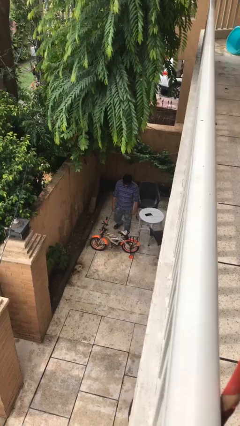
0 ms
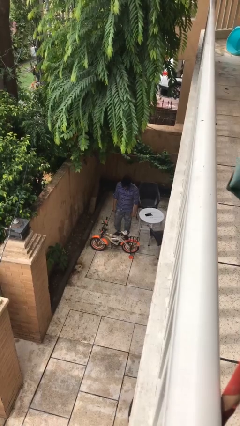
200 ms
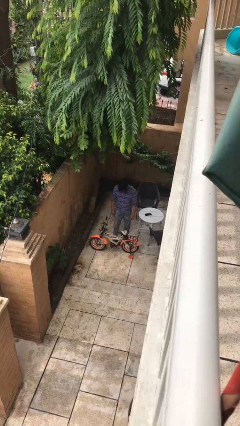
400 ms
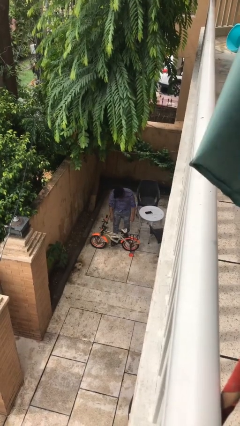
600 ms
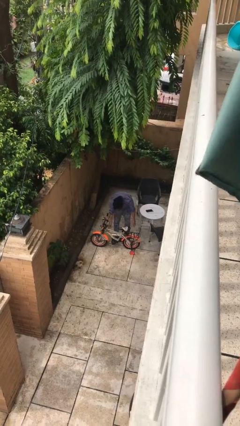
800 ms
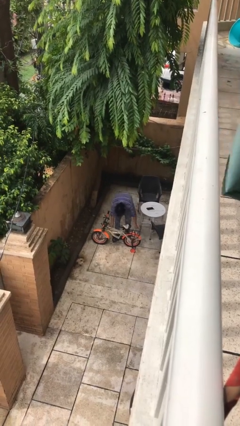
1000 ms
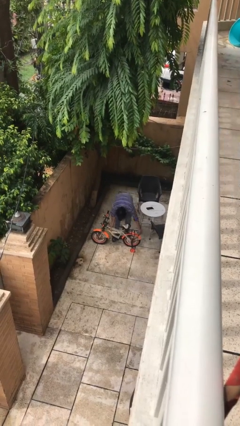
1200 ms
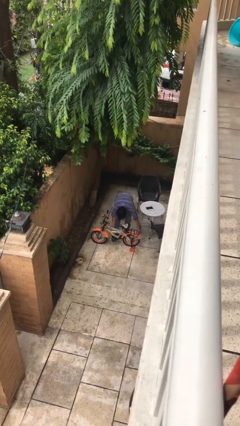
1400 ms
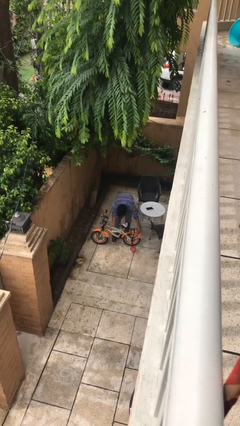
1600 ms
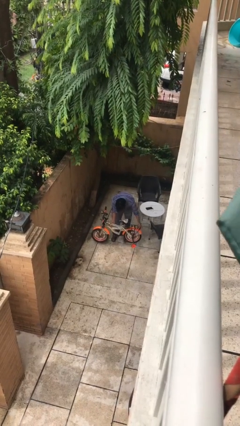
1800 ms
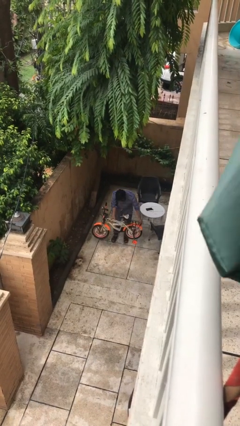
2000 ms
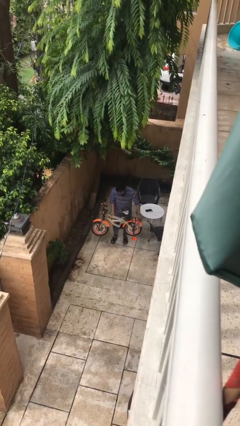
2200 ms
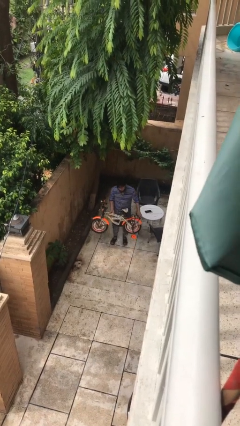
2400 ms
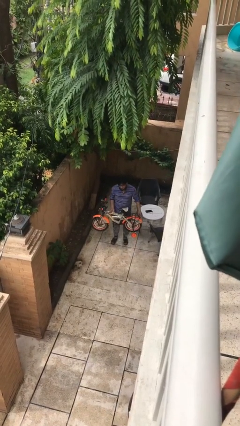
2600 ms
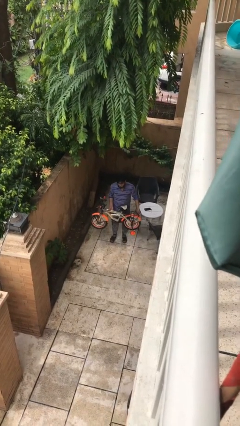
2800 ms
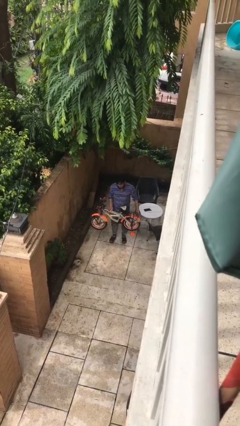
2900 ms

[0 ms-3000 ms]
person picks up object from floor

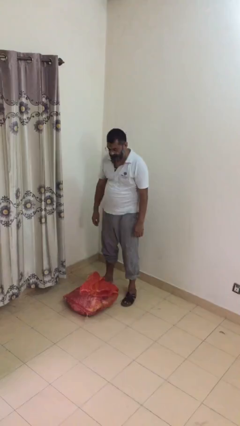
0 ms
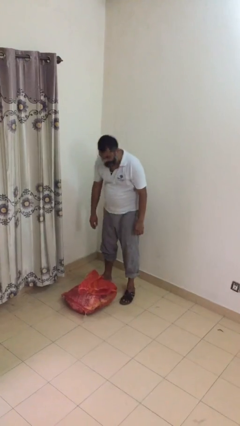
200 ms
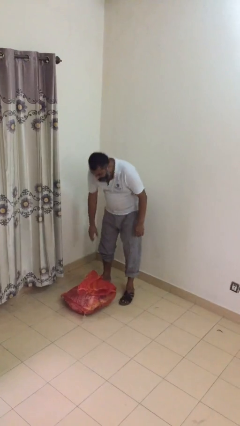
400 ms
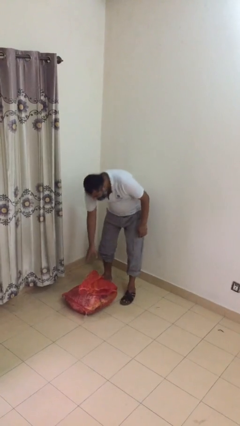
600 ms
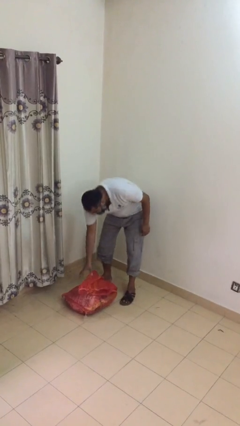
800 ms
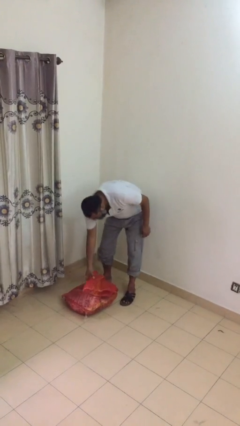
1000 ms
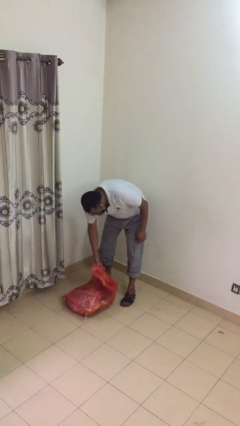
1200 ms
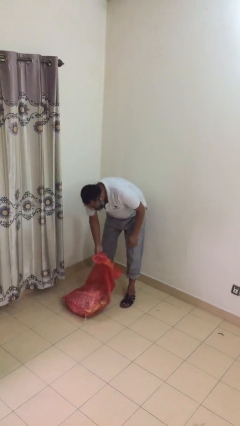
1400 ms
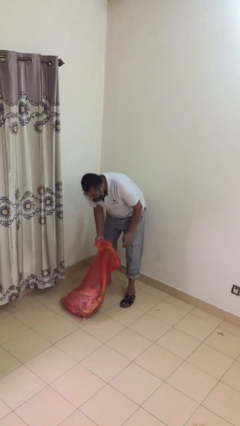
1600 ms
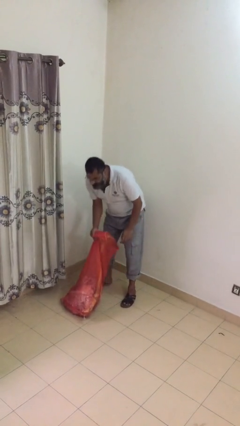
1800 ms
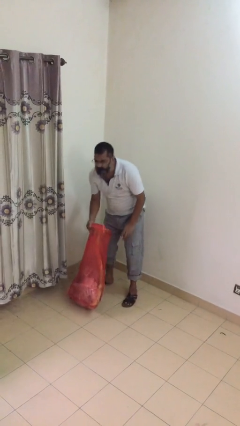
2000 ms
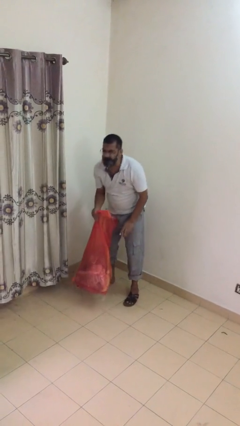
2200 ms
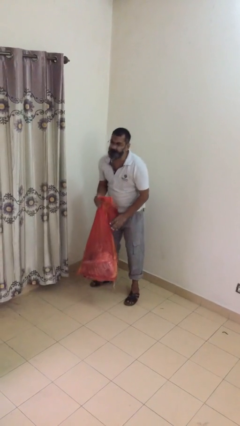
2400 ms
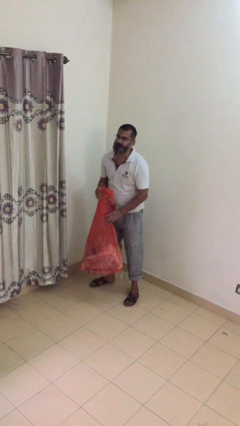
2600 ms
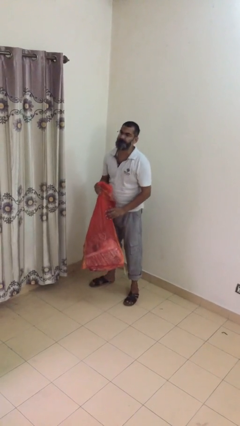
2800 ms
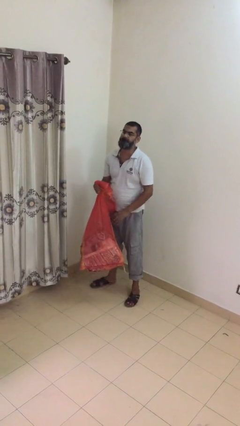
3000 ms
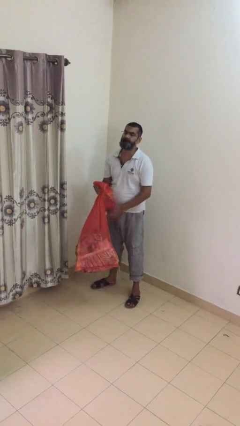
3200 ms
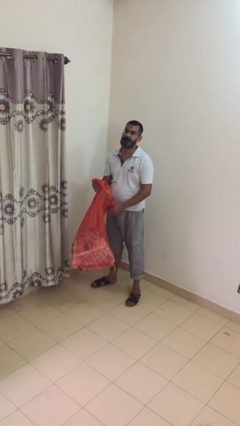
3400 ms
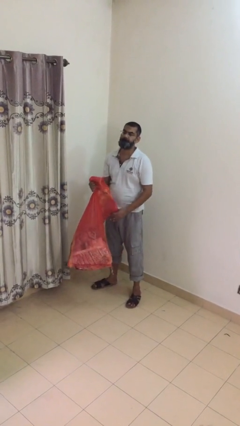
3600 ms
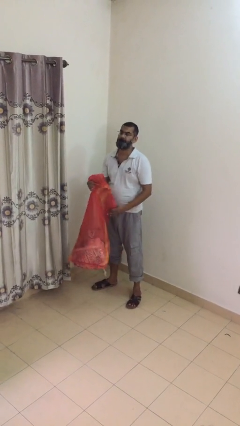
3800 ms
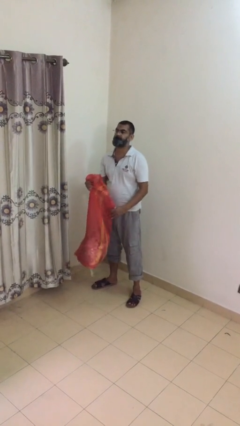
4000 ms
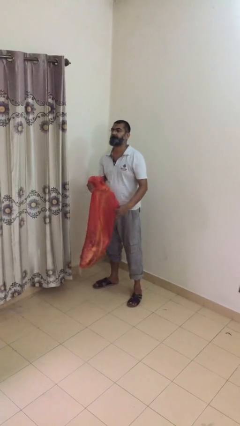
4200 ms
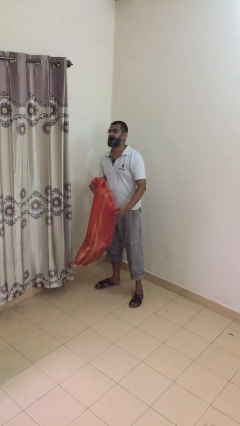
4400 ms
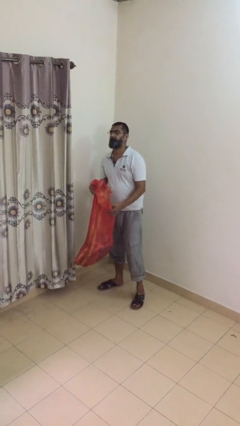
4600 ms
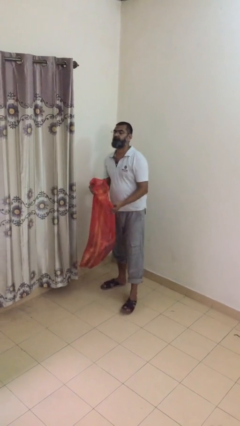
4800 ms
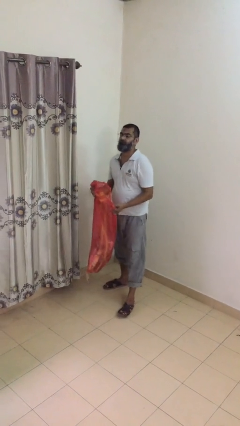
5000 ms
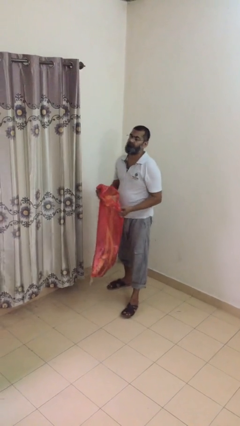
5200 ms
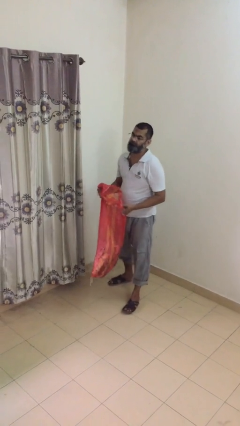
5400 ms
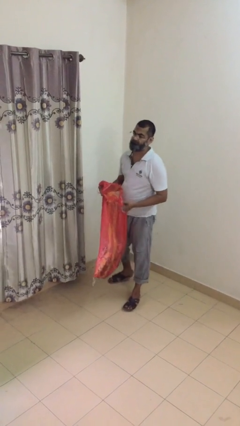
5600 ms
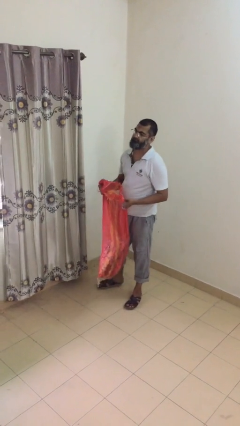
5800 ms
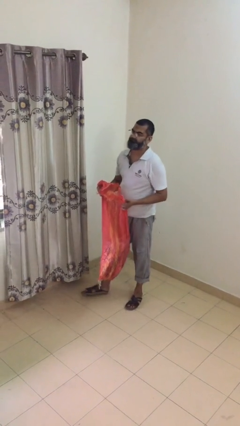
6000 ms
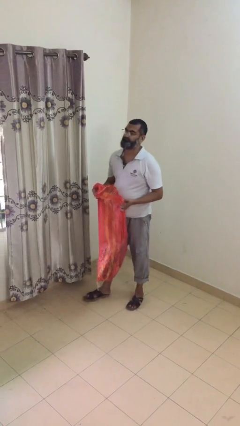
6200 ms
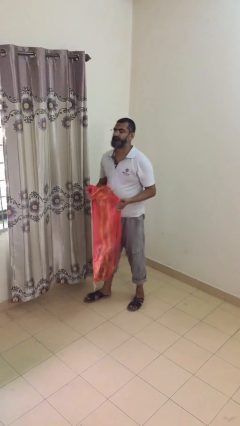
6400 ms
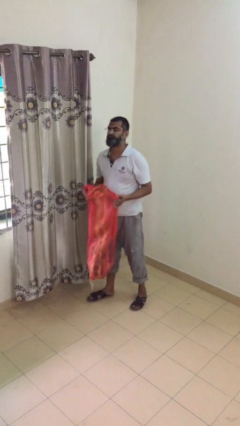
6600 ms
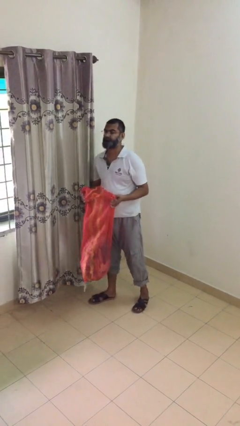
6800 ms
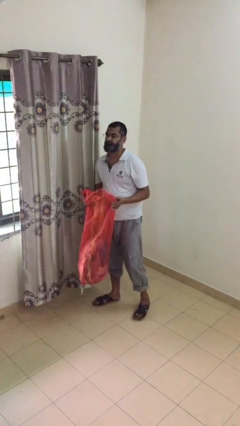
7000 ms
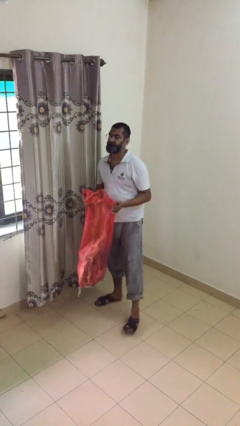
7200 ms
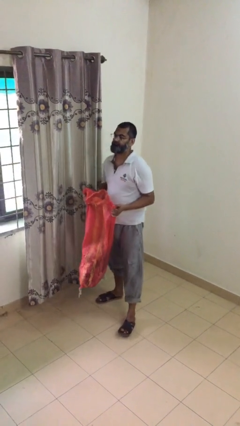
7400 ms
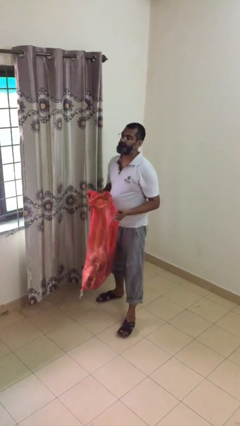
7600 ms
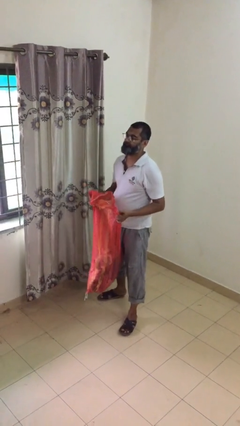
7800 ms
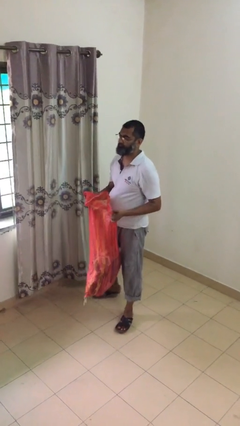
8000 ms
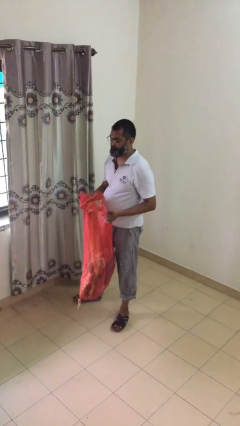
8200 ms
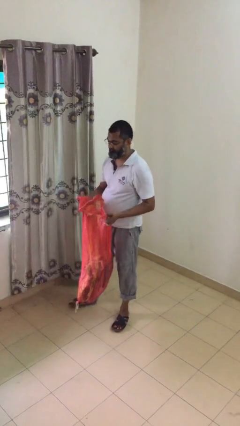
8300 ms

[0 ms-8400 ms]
person carries heavy object

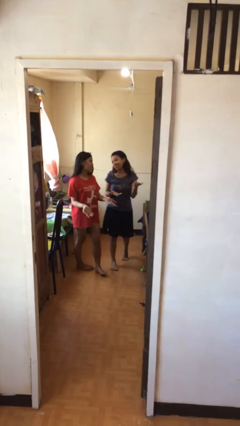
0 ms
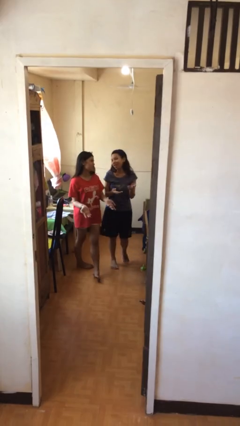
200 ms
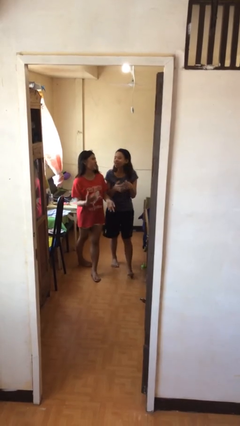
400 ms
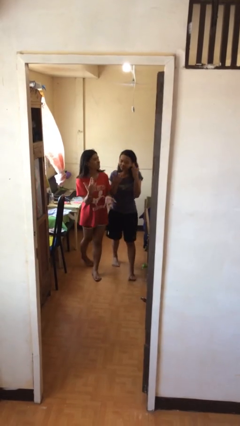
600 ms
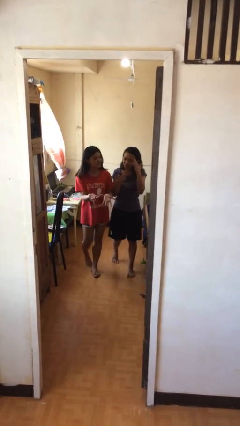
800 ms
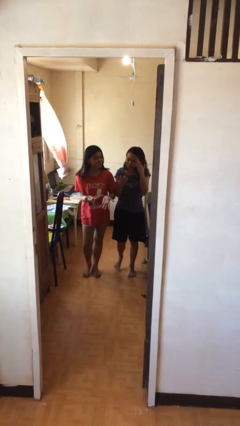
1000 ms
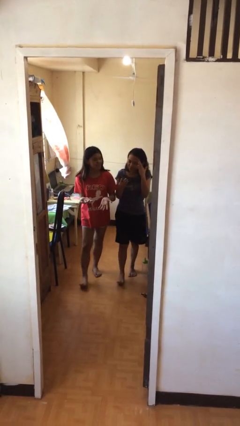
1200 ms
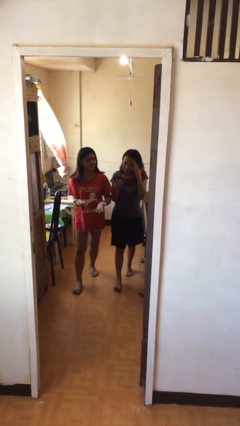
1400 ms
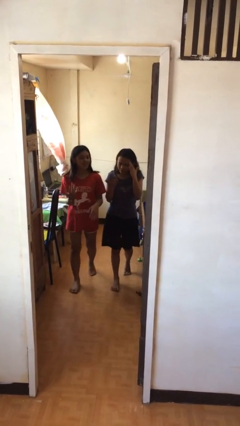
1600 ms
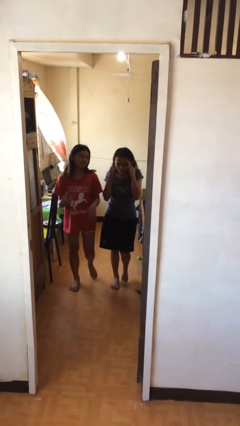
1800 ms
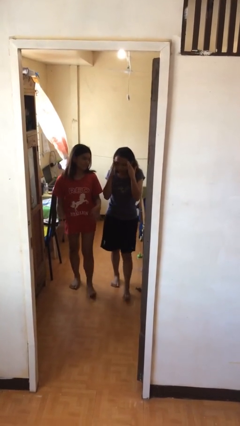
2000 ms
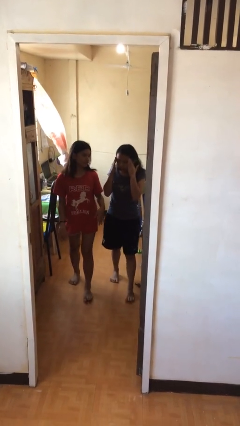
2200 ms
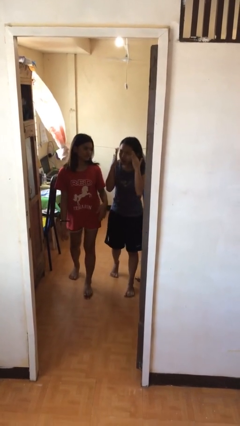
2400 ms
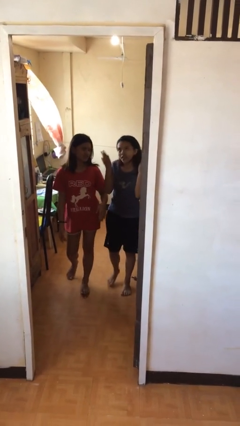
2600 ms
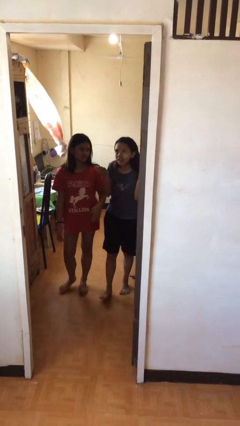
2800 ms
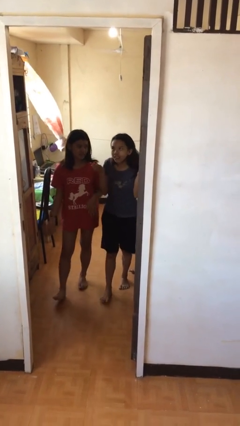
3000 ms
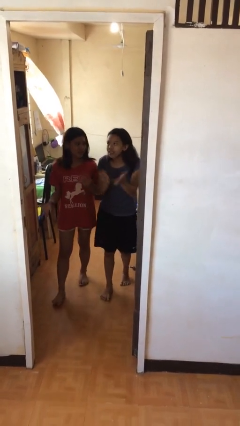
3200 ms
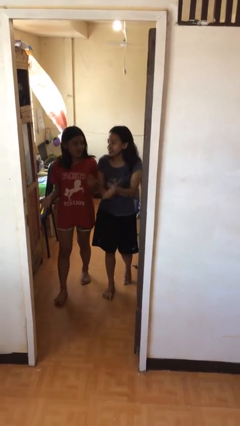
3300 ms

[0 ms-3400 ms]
person talks to person

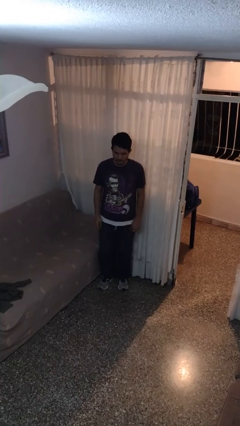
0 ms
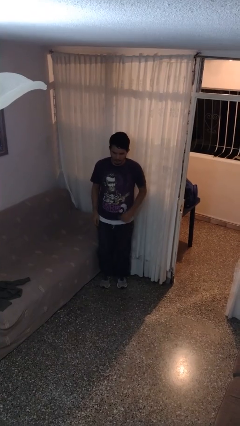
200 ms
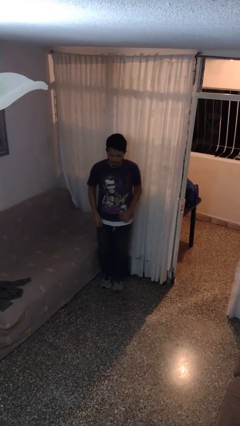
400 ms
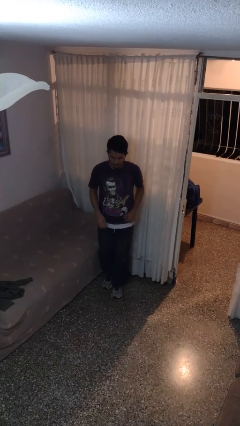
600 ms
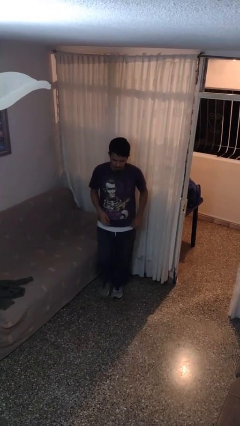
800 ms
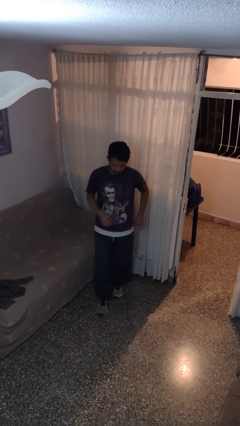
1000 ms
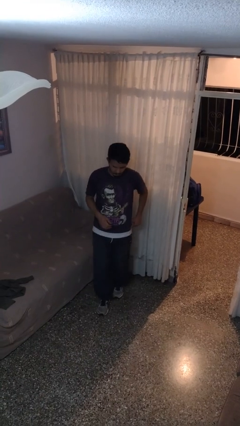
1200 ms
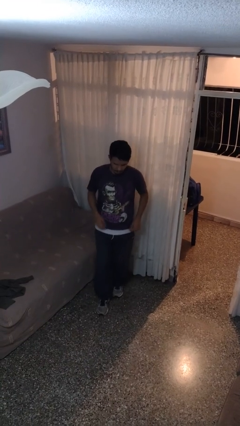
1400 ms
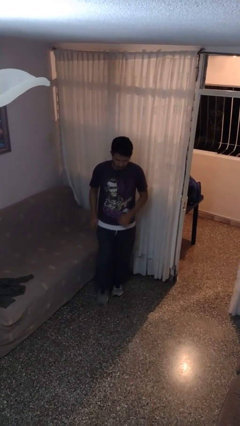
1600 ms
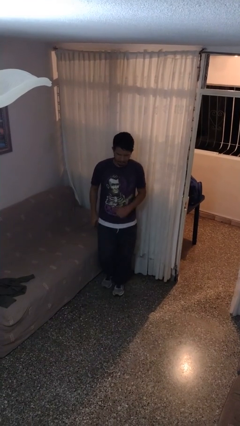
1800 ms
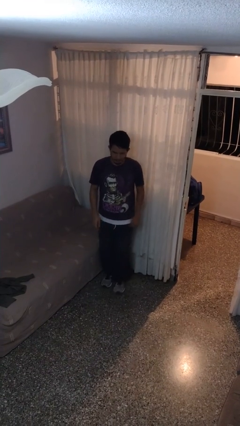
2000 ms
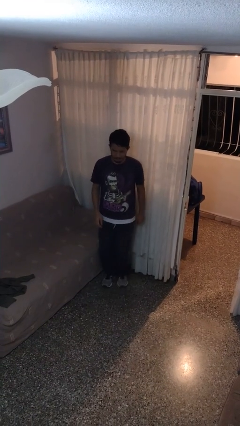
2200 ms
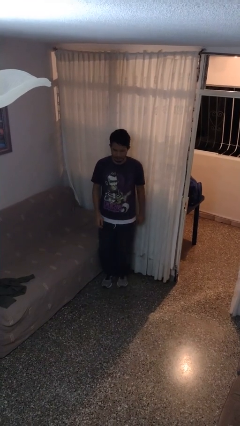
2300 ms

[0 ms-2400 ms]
person dances in place

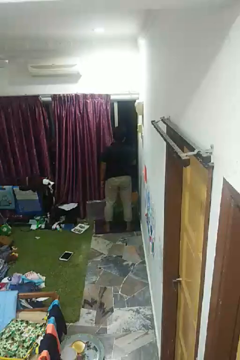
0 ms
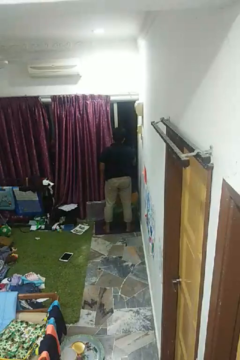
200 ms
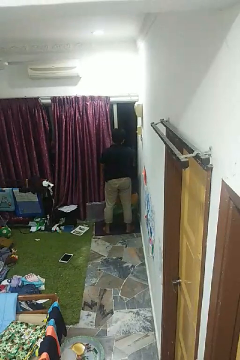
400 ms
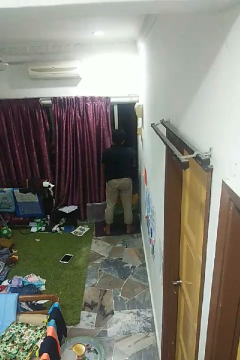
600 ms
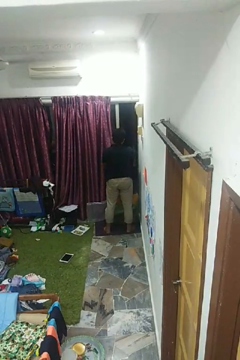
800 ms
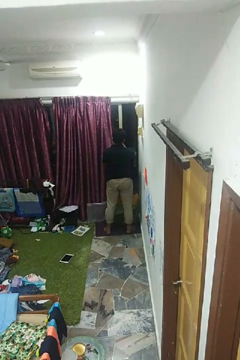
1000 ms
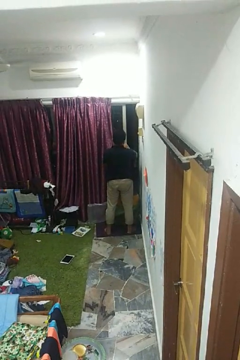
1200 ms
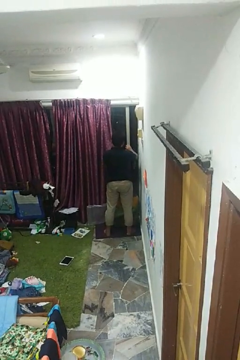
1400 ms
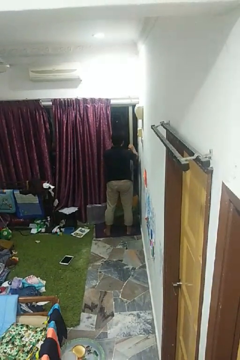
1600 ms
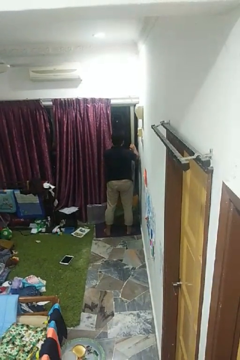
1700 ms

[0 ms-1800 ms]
person closes home window
